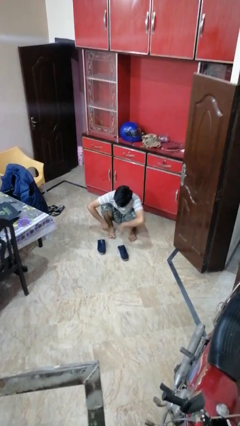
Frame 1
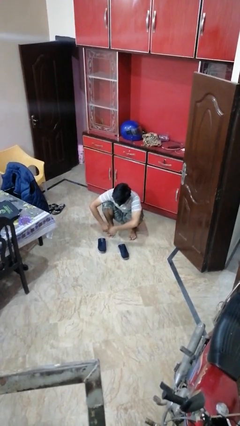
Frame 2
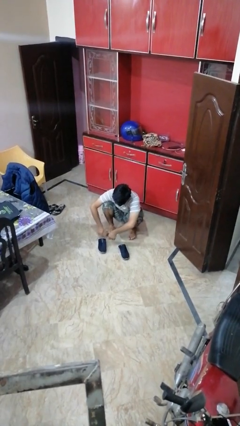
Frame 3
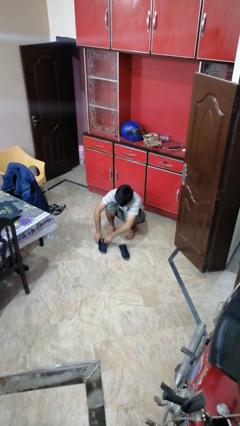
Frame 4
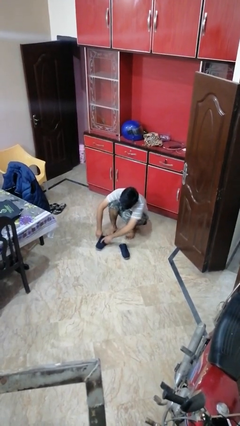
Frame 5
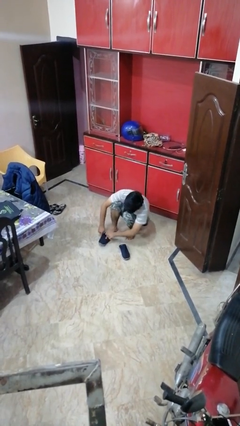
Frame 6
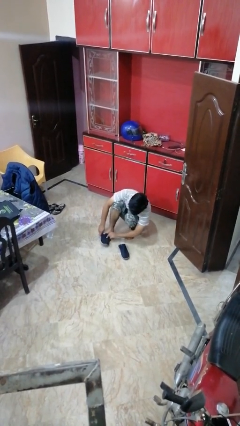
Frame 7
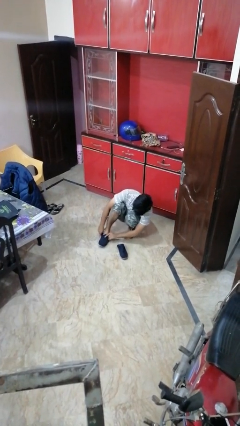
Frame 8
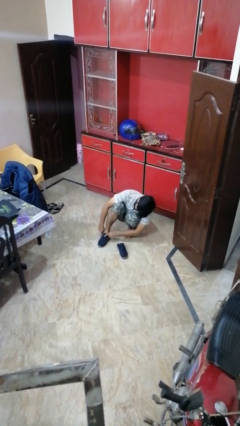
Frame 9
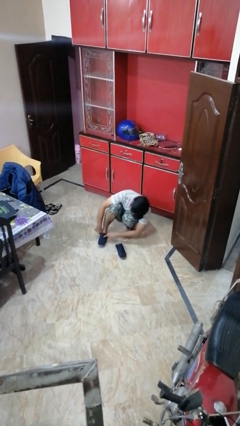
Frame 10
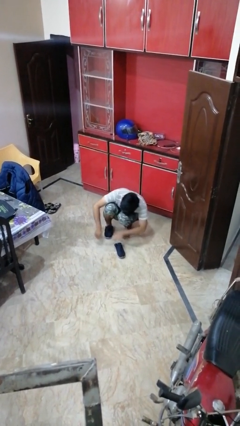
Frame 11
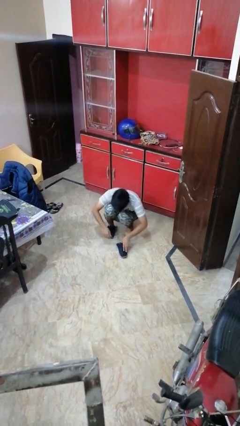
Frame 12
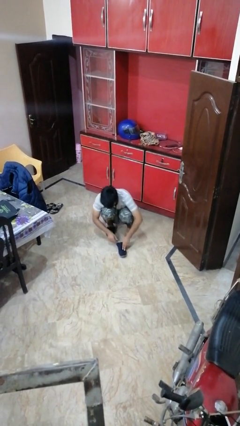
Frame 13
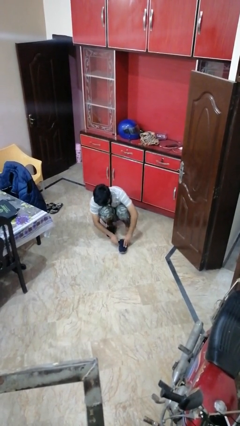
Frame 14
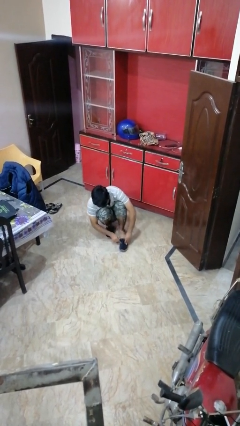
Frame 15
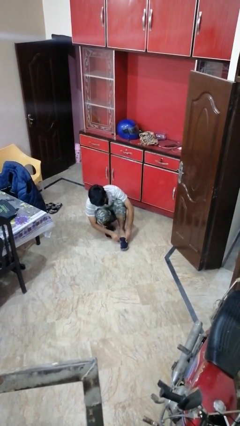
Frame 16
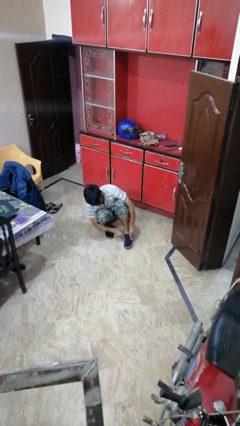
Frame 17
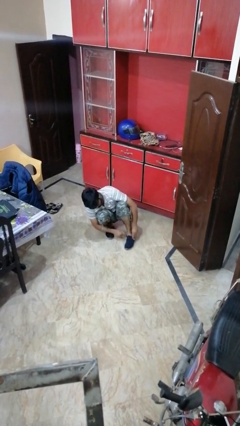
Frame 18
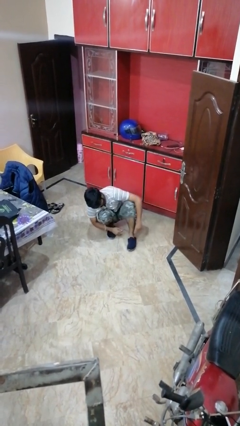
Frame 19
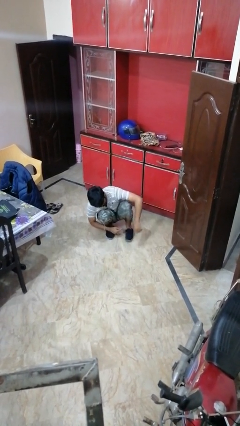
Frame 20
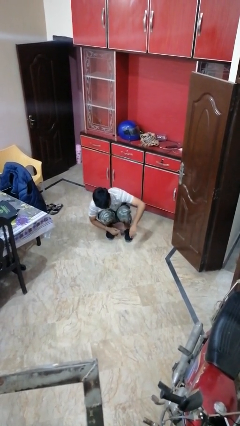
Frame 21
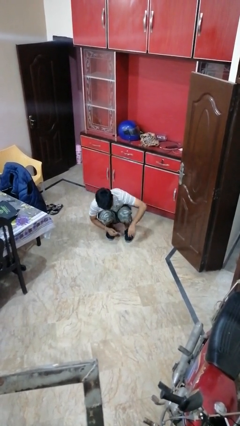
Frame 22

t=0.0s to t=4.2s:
person puts on shoes

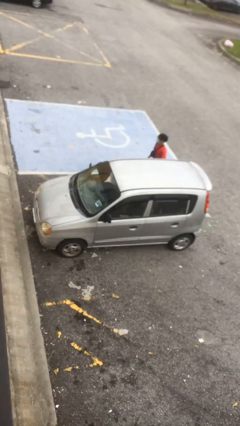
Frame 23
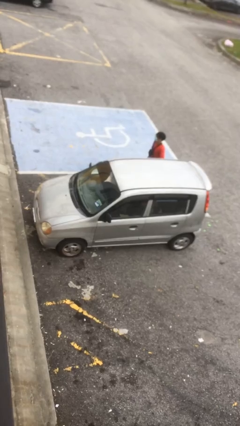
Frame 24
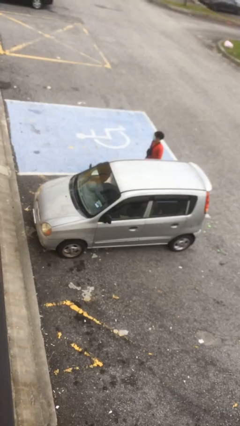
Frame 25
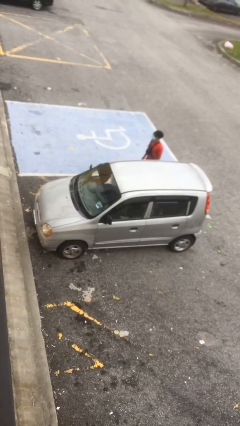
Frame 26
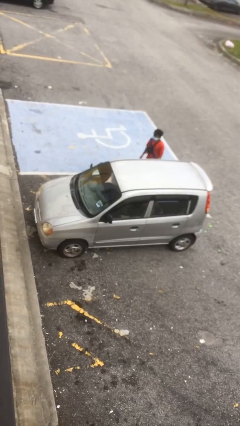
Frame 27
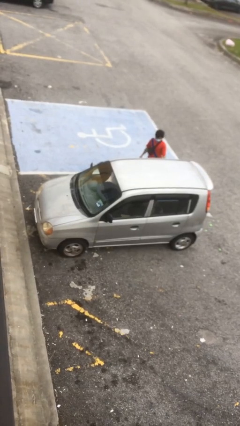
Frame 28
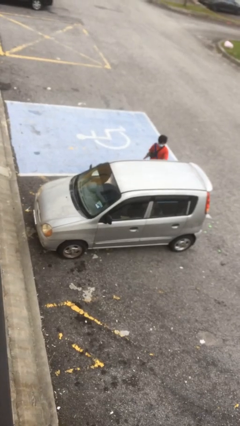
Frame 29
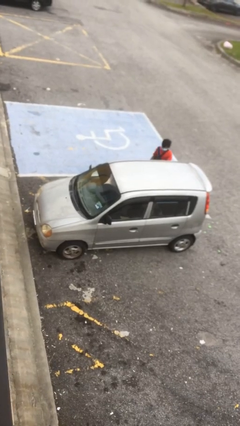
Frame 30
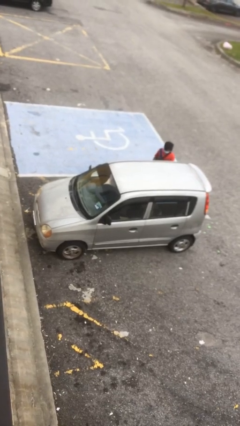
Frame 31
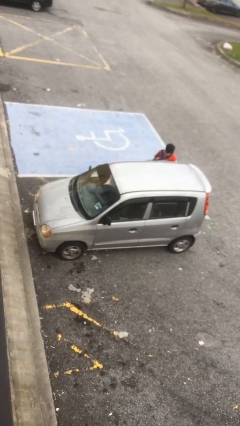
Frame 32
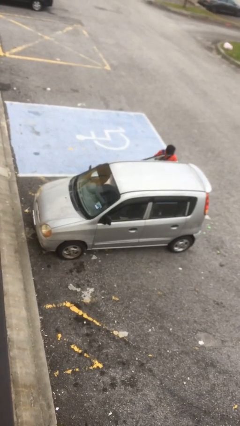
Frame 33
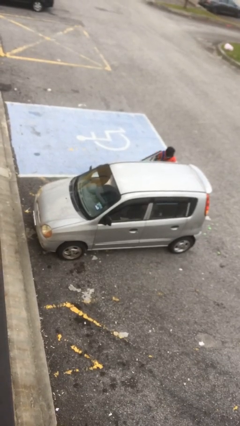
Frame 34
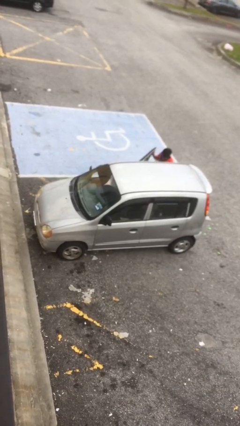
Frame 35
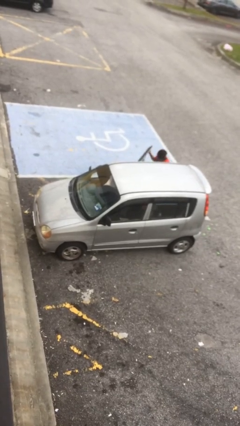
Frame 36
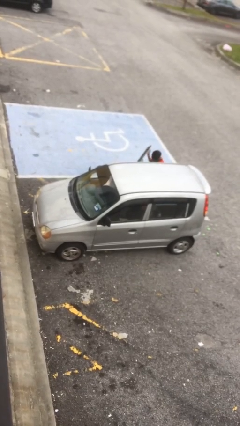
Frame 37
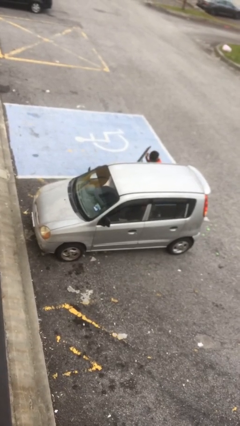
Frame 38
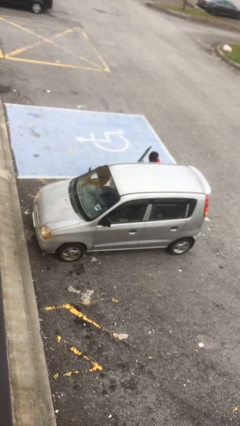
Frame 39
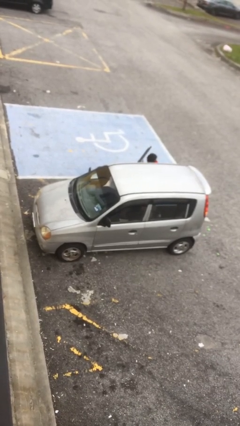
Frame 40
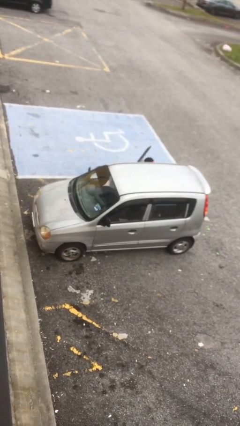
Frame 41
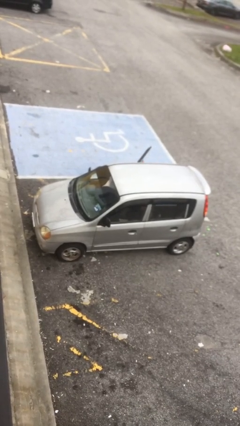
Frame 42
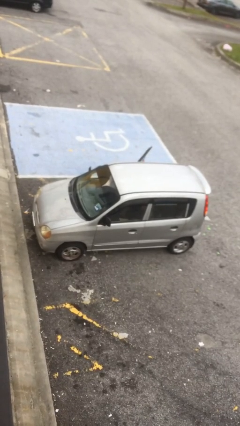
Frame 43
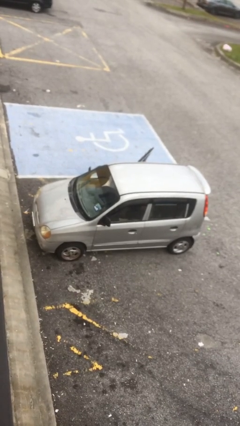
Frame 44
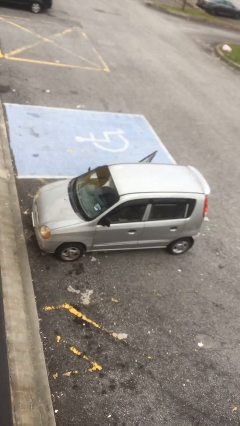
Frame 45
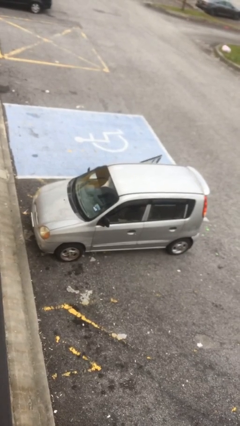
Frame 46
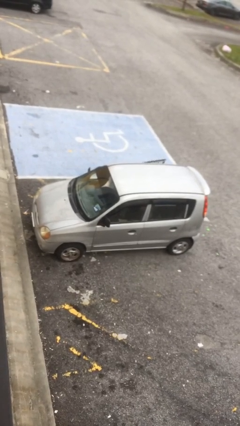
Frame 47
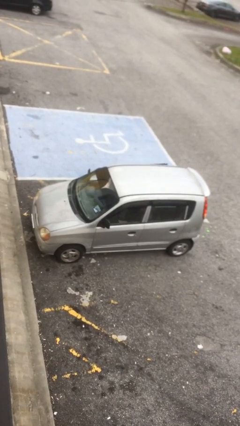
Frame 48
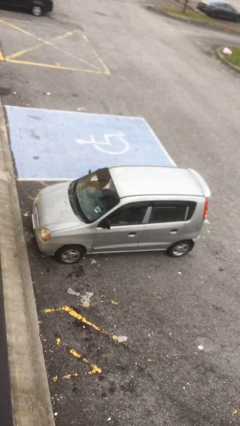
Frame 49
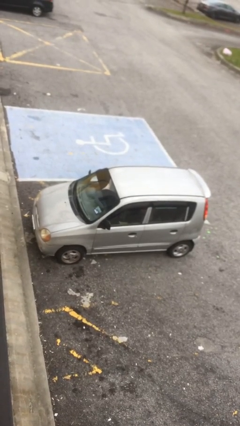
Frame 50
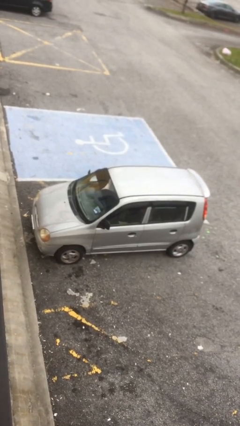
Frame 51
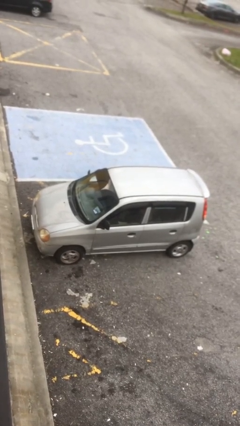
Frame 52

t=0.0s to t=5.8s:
car picks up person

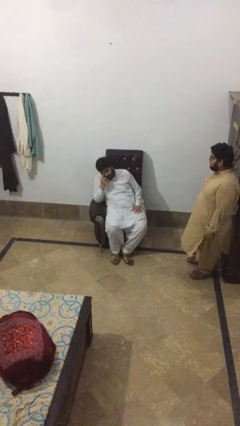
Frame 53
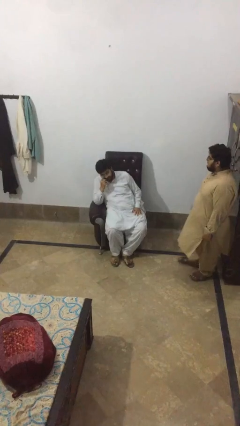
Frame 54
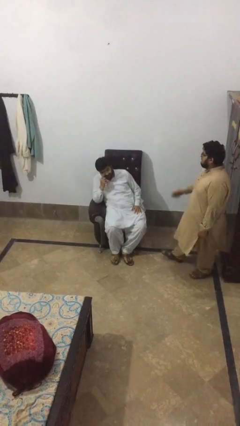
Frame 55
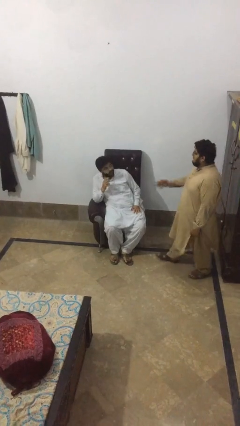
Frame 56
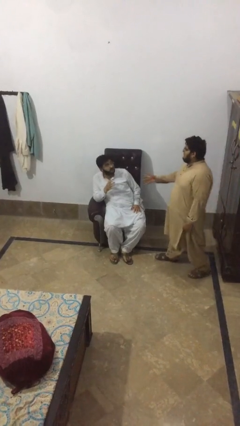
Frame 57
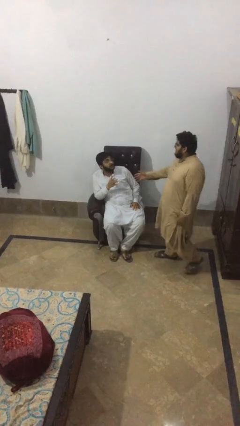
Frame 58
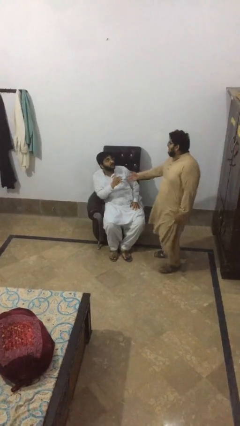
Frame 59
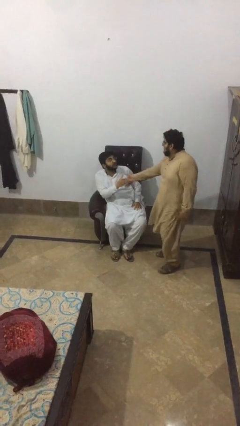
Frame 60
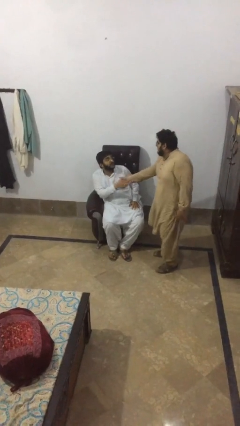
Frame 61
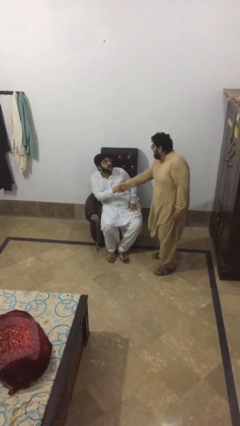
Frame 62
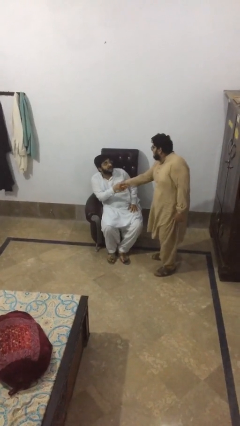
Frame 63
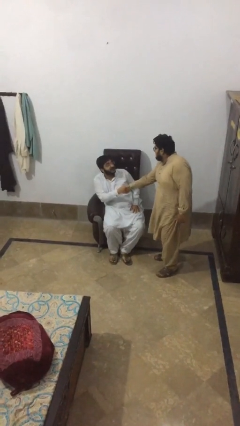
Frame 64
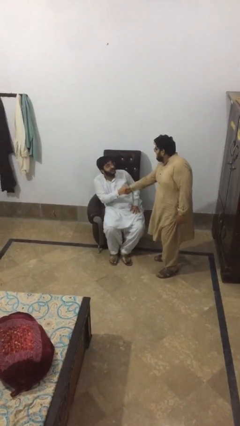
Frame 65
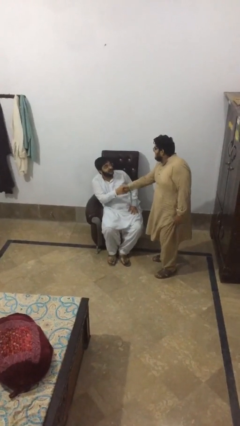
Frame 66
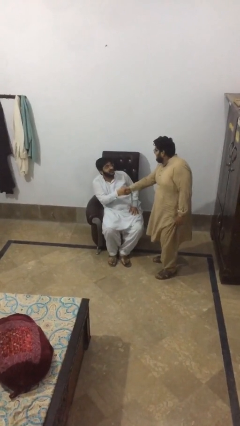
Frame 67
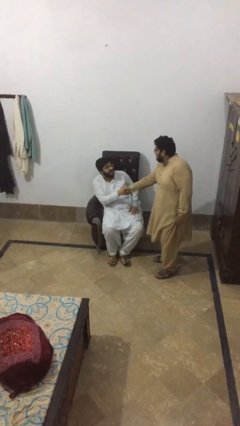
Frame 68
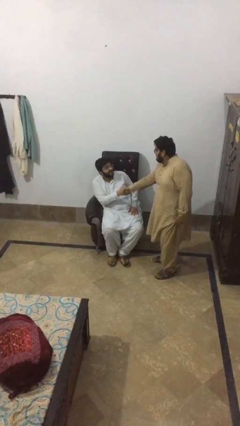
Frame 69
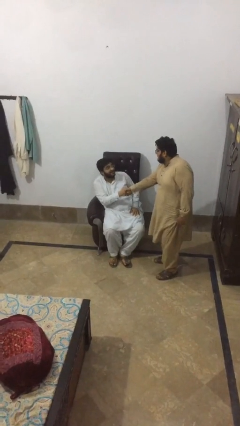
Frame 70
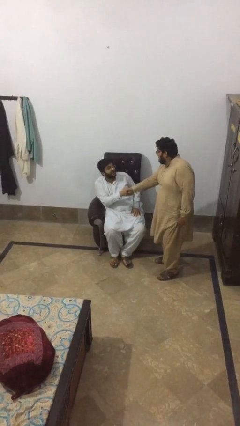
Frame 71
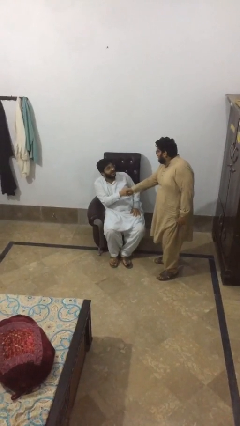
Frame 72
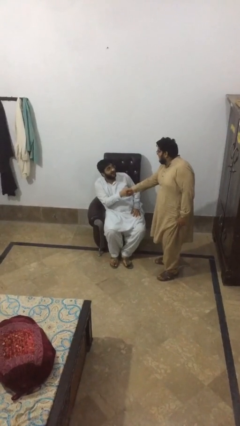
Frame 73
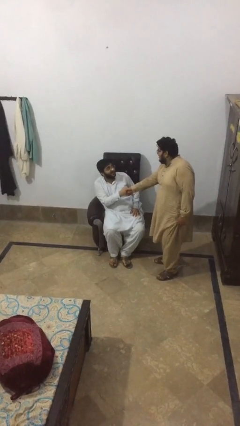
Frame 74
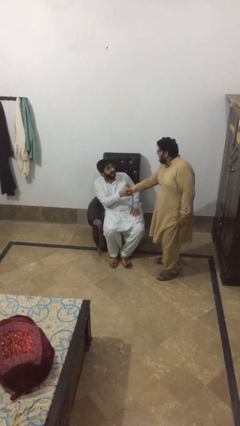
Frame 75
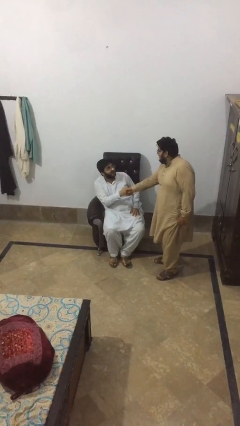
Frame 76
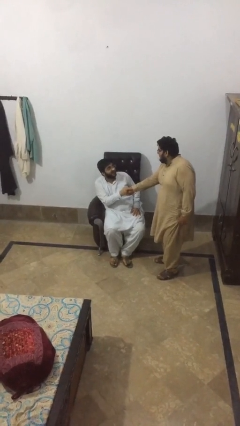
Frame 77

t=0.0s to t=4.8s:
person shakes hand

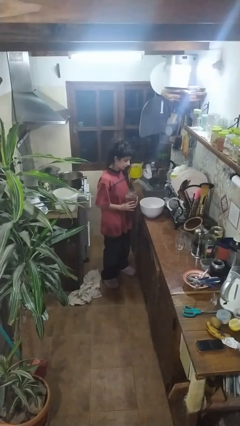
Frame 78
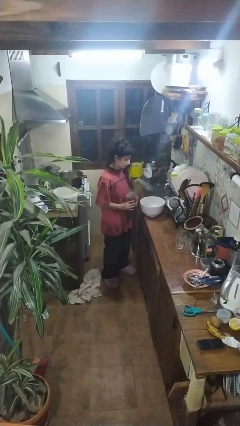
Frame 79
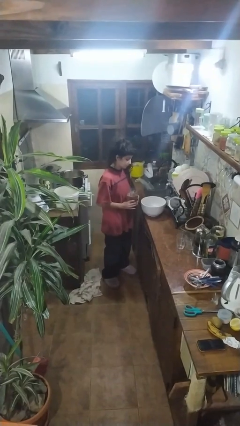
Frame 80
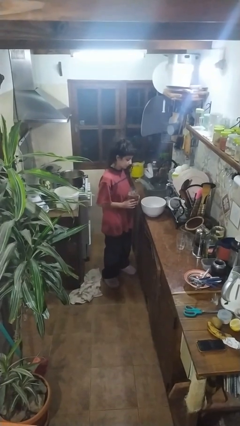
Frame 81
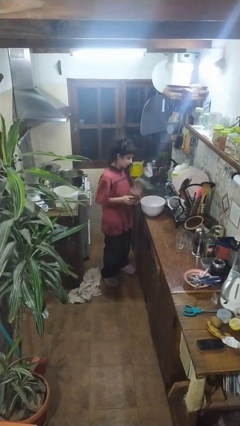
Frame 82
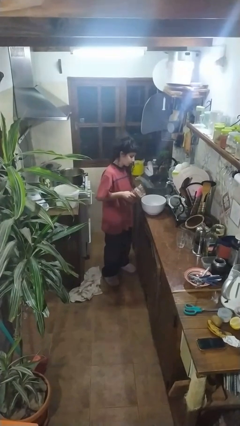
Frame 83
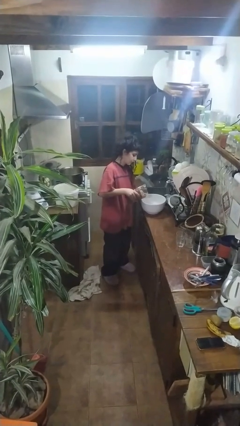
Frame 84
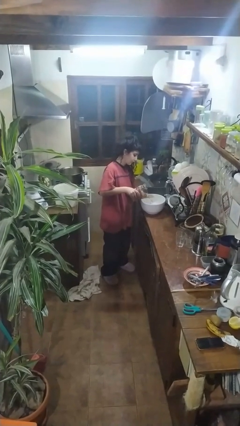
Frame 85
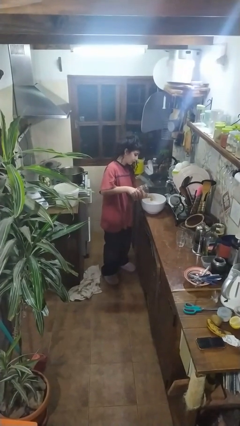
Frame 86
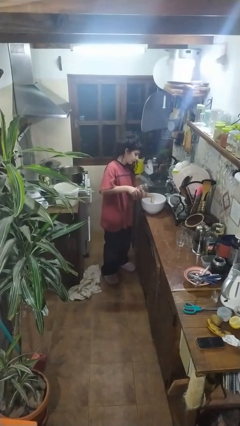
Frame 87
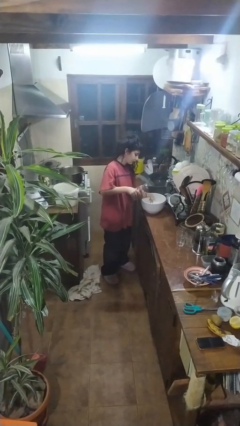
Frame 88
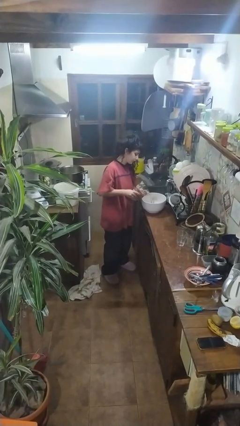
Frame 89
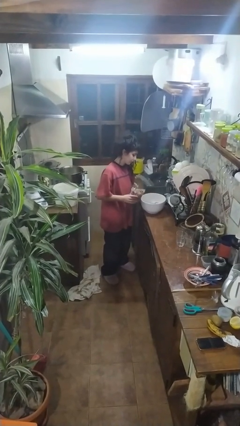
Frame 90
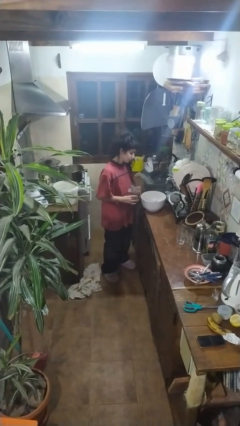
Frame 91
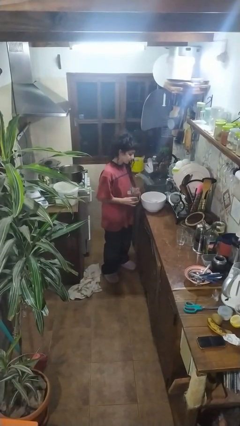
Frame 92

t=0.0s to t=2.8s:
person pours into bowl

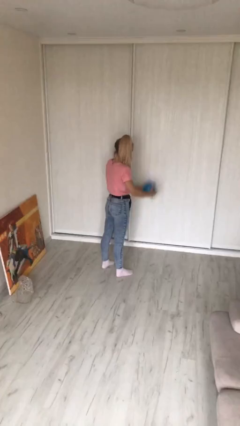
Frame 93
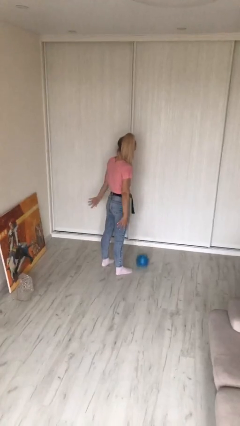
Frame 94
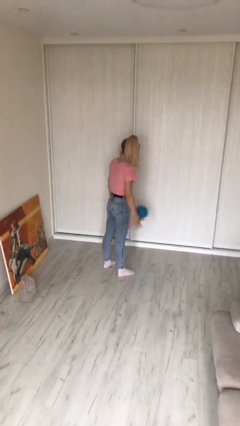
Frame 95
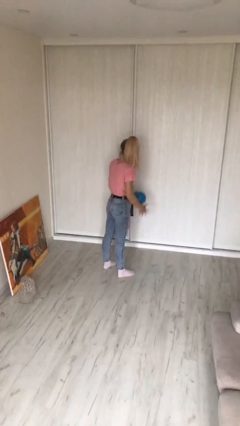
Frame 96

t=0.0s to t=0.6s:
person bounces ball on floor
